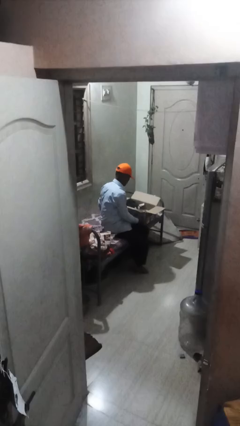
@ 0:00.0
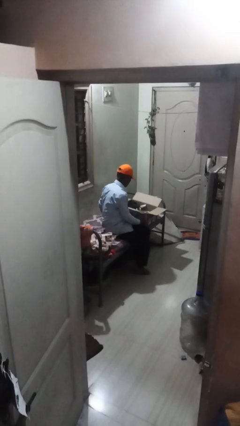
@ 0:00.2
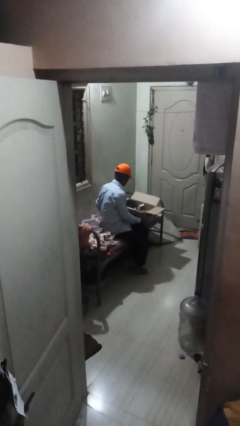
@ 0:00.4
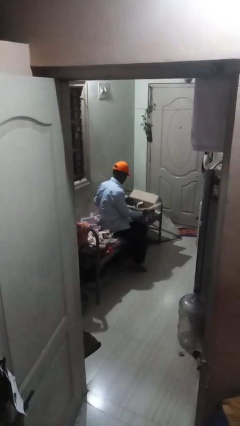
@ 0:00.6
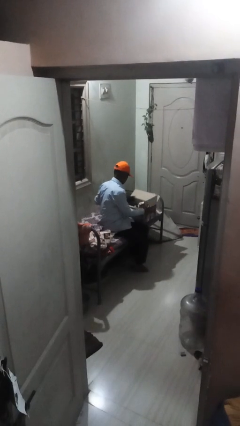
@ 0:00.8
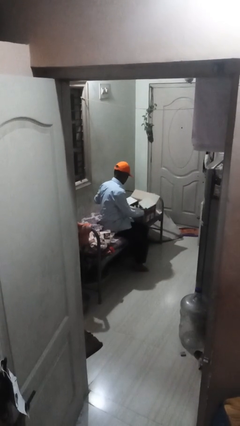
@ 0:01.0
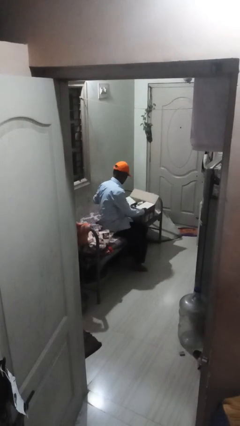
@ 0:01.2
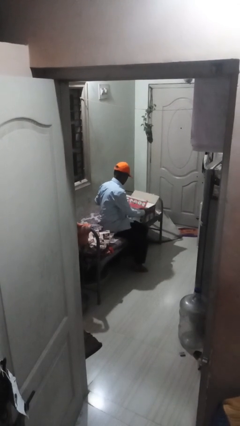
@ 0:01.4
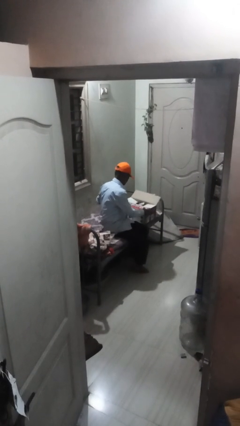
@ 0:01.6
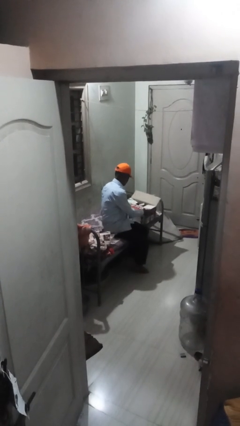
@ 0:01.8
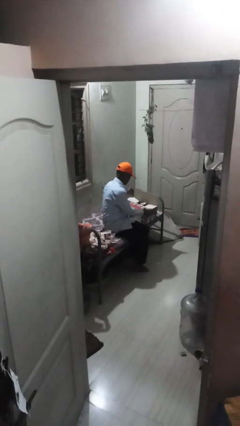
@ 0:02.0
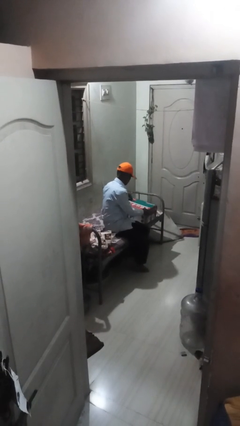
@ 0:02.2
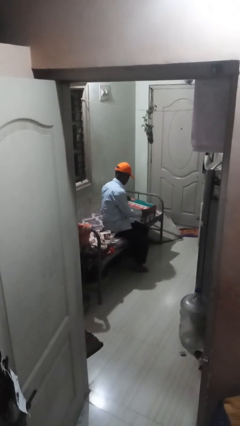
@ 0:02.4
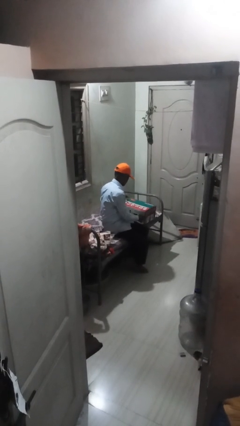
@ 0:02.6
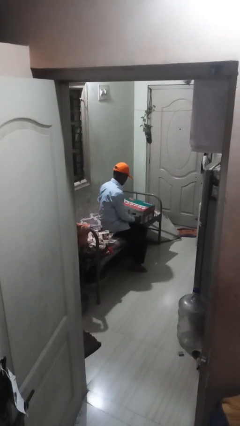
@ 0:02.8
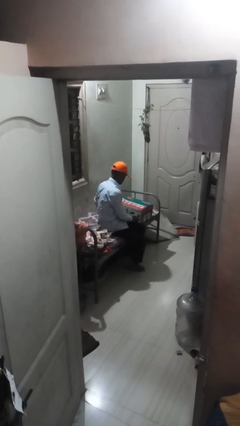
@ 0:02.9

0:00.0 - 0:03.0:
person closes box

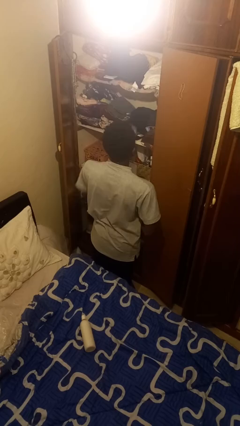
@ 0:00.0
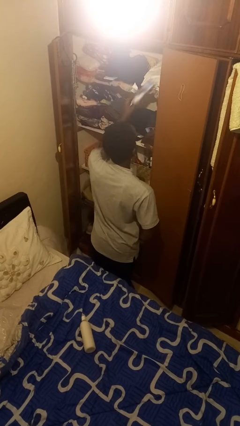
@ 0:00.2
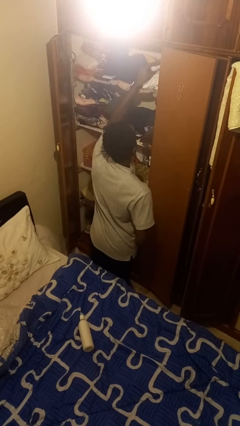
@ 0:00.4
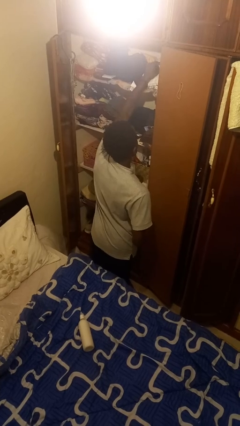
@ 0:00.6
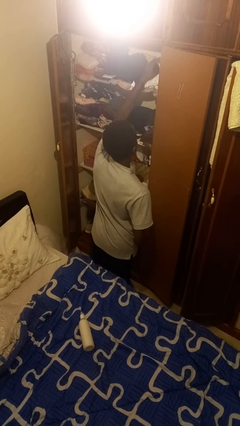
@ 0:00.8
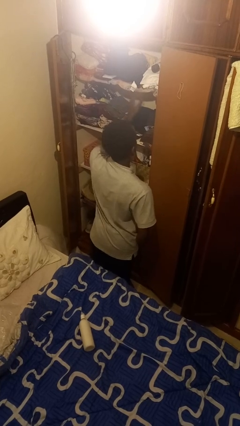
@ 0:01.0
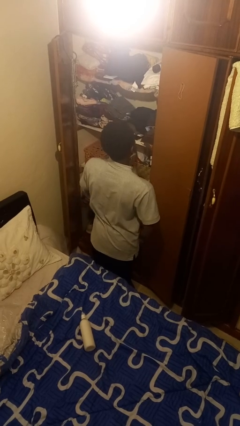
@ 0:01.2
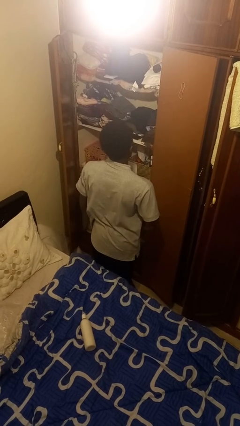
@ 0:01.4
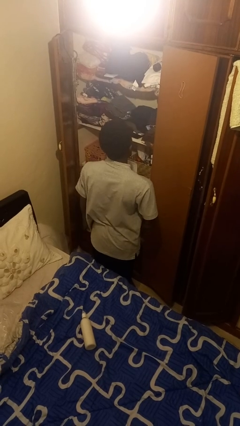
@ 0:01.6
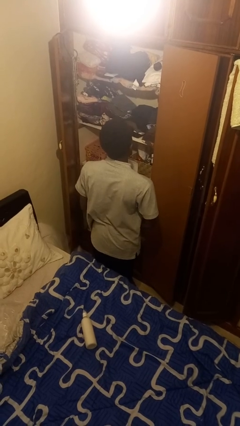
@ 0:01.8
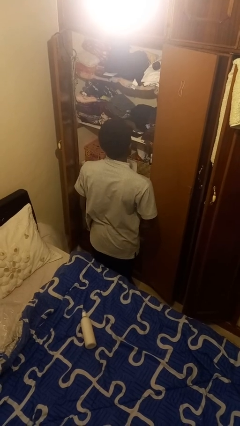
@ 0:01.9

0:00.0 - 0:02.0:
person puts down object on shelf

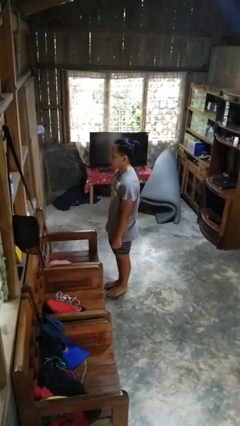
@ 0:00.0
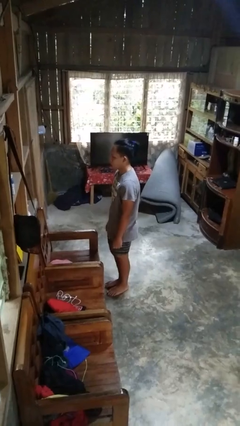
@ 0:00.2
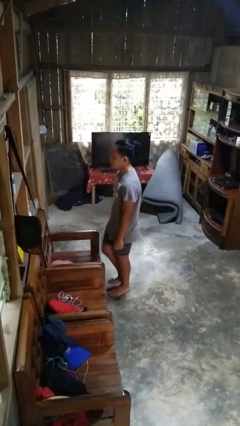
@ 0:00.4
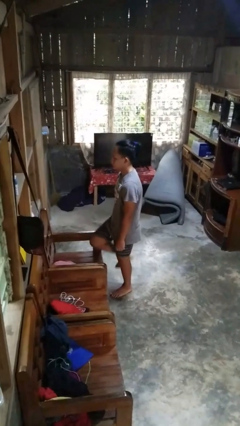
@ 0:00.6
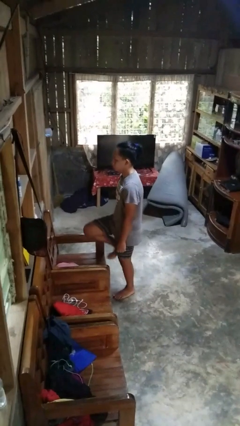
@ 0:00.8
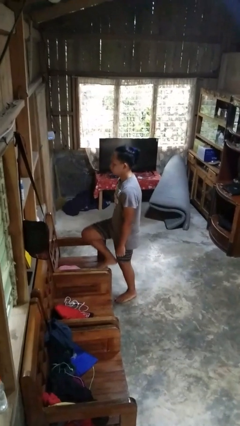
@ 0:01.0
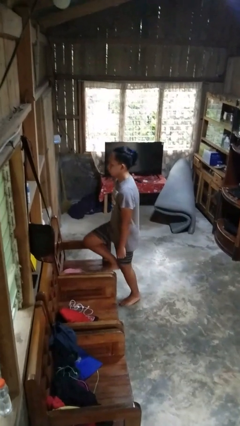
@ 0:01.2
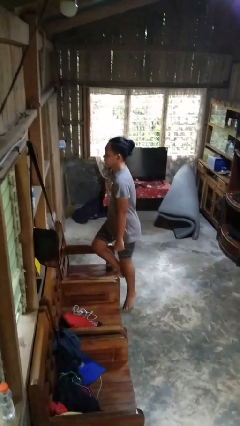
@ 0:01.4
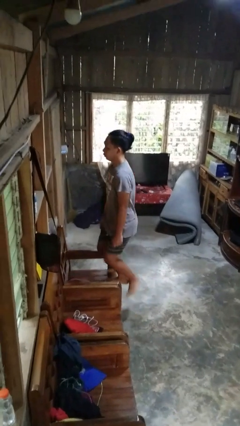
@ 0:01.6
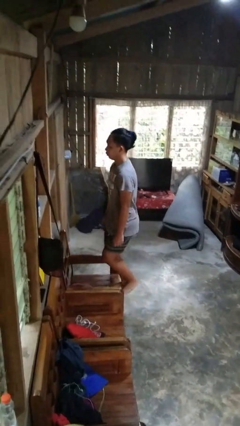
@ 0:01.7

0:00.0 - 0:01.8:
person climbs on chair

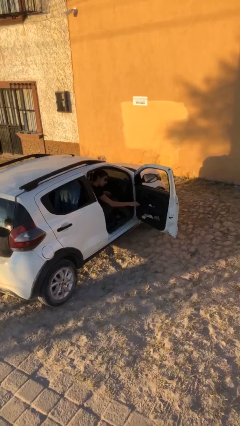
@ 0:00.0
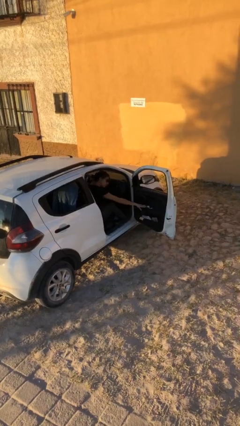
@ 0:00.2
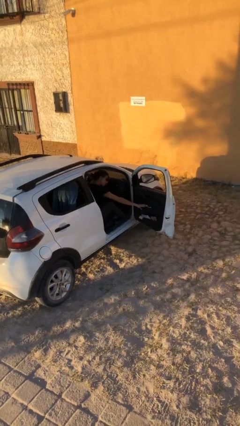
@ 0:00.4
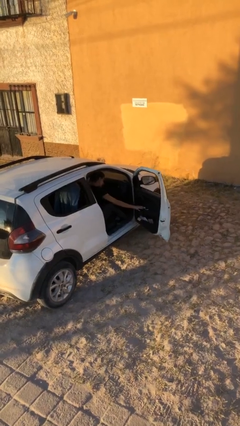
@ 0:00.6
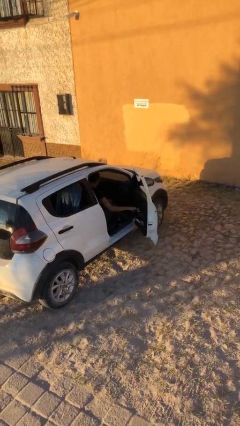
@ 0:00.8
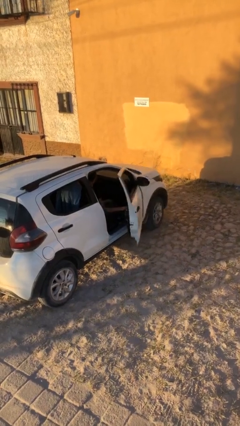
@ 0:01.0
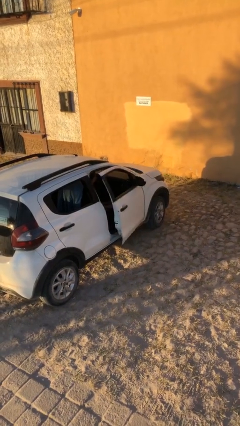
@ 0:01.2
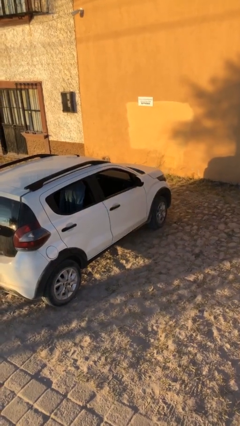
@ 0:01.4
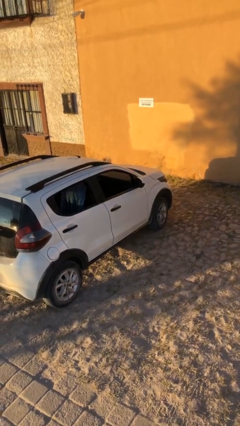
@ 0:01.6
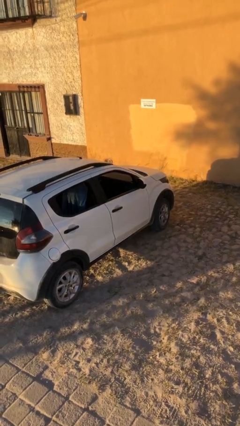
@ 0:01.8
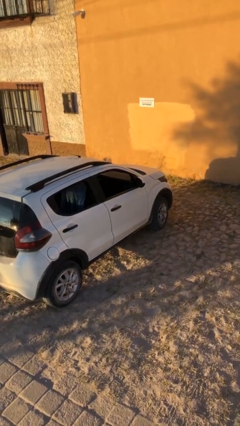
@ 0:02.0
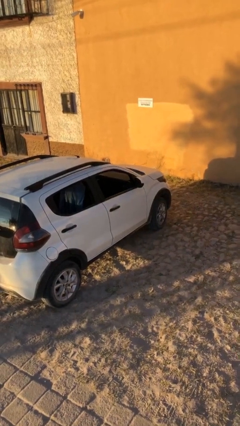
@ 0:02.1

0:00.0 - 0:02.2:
person closes car door

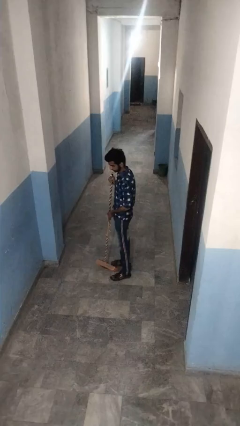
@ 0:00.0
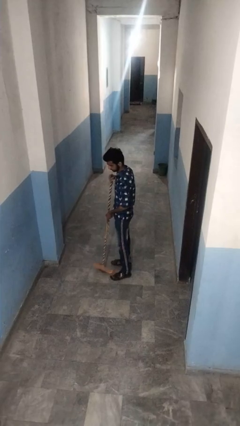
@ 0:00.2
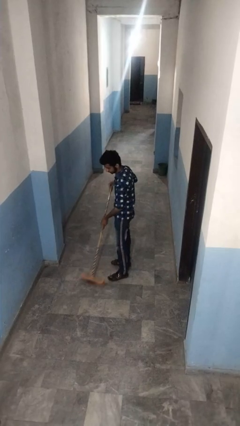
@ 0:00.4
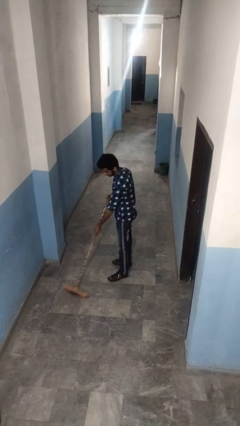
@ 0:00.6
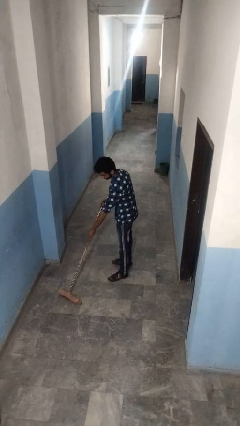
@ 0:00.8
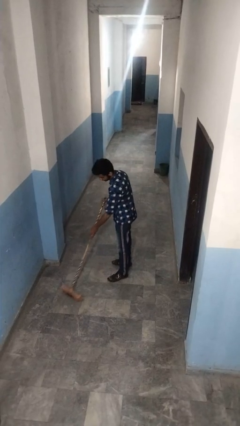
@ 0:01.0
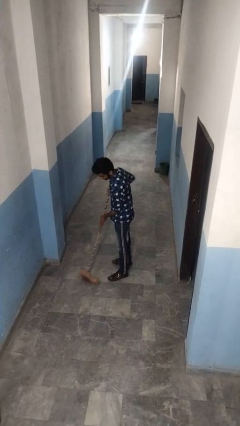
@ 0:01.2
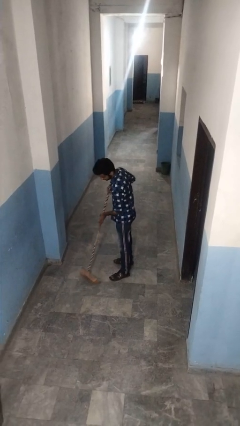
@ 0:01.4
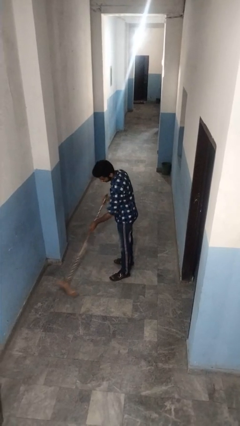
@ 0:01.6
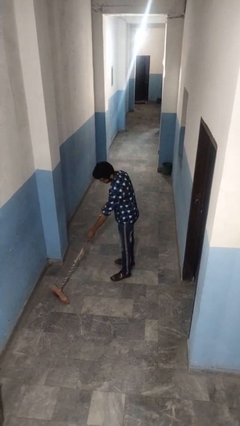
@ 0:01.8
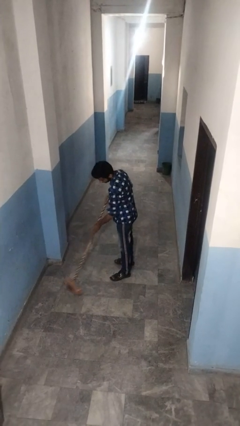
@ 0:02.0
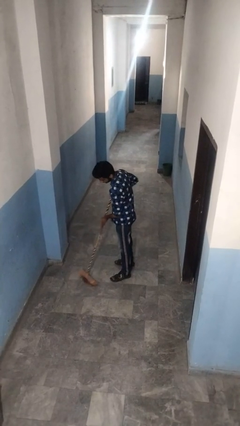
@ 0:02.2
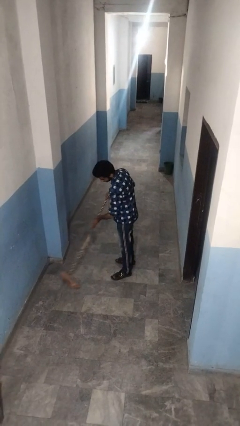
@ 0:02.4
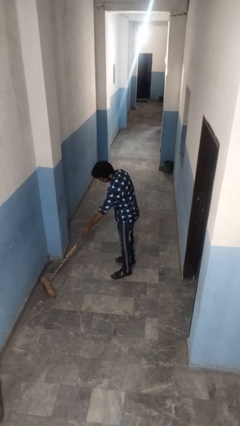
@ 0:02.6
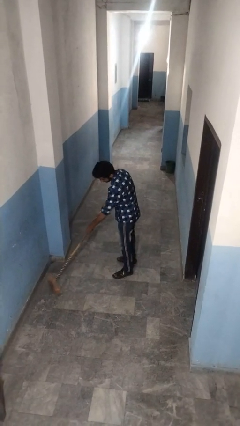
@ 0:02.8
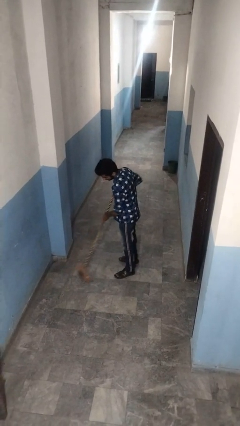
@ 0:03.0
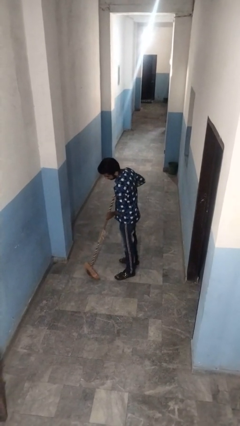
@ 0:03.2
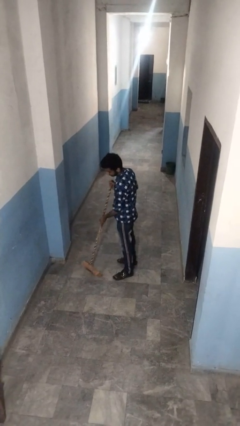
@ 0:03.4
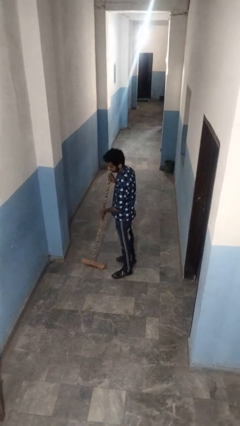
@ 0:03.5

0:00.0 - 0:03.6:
person sweeps floor

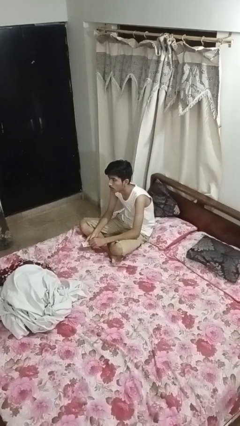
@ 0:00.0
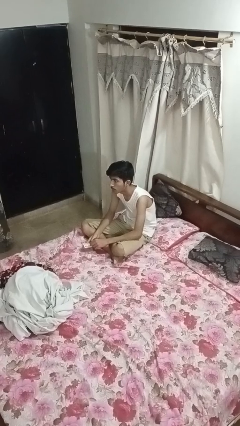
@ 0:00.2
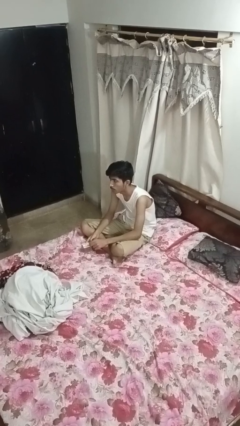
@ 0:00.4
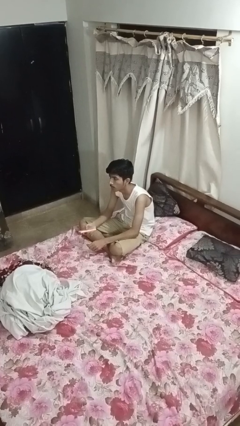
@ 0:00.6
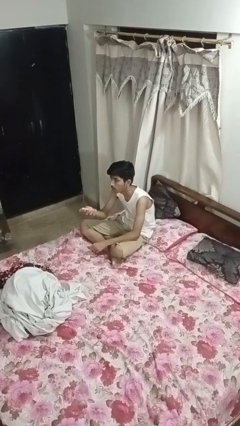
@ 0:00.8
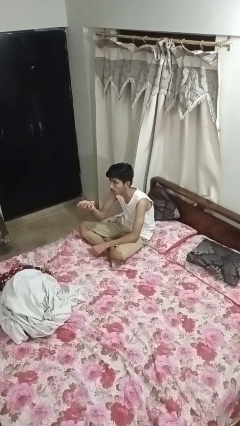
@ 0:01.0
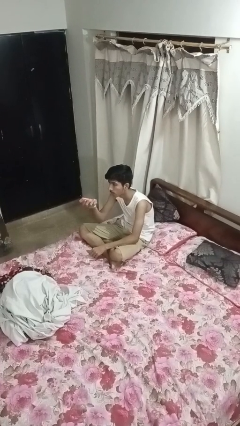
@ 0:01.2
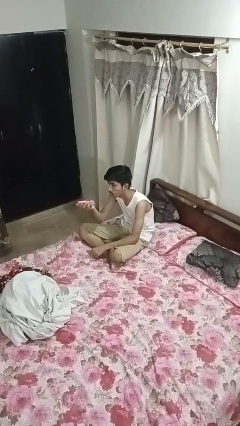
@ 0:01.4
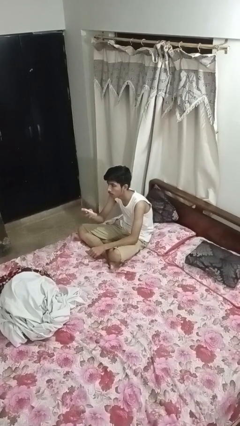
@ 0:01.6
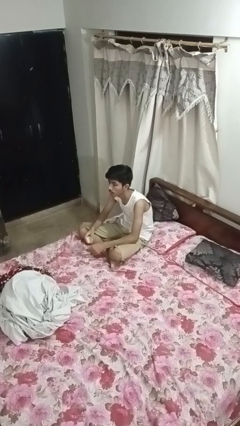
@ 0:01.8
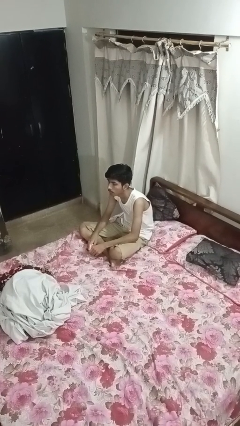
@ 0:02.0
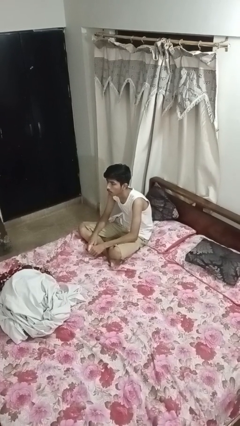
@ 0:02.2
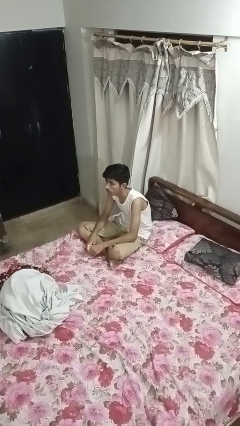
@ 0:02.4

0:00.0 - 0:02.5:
person uses television remote

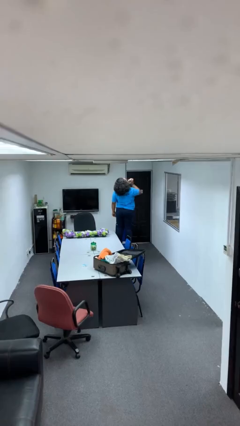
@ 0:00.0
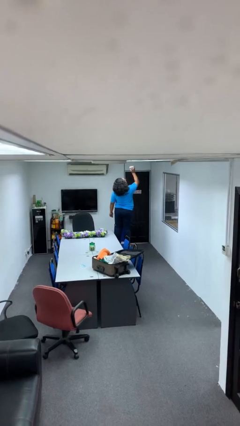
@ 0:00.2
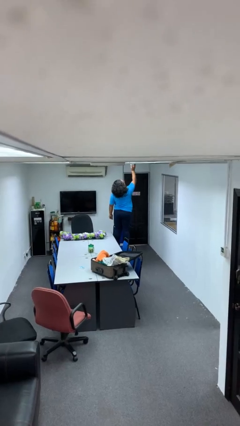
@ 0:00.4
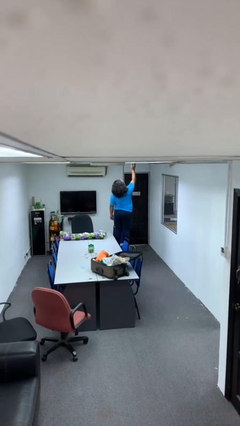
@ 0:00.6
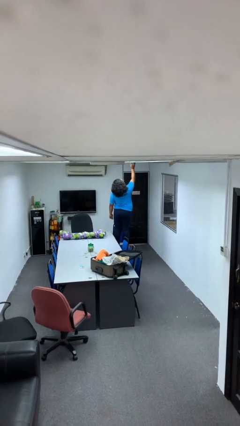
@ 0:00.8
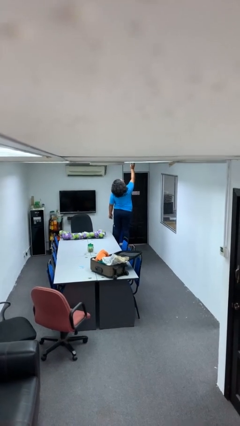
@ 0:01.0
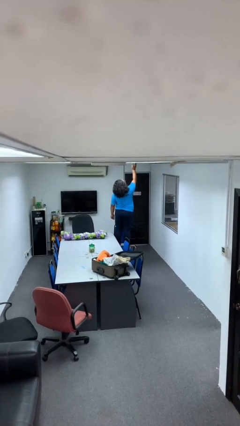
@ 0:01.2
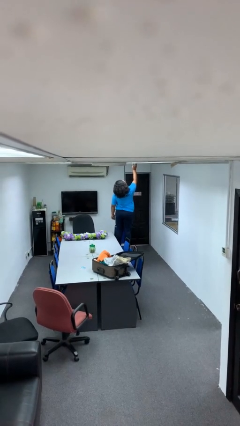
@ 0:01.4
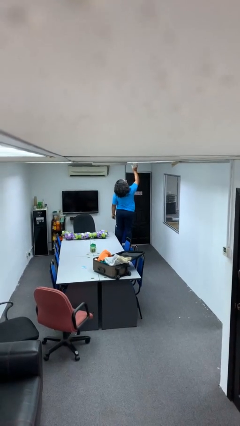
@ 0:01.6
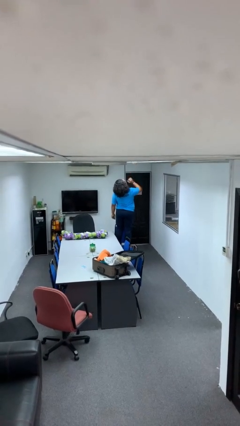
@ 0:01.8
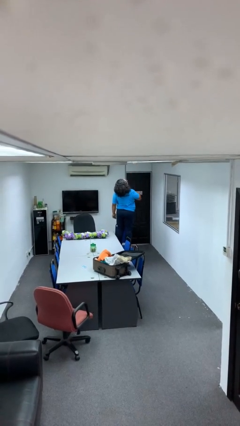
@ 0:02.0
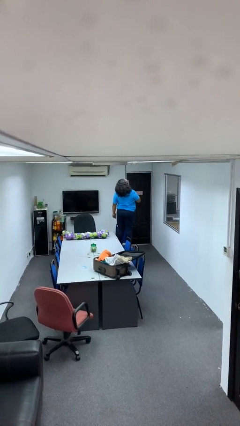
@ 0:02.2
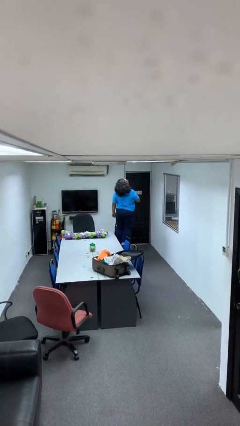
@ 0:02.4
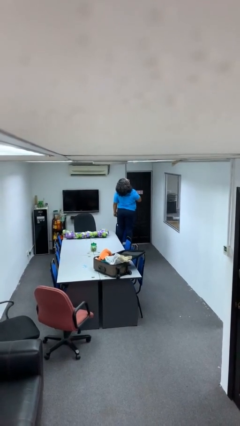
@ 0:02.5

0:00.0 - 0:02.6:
person puts up smoke detector
